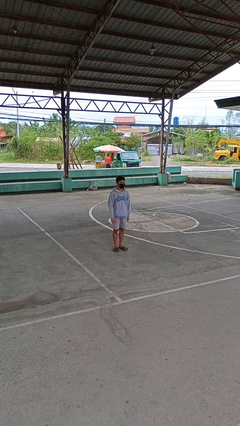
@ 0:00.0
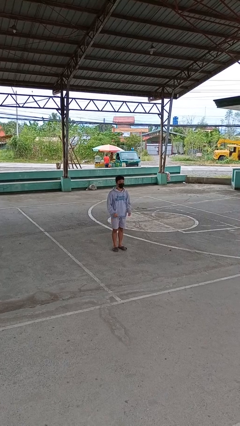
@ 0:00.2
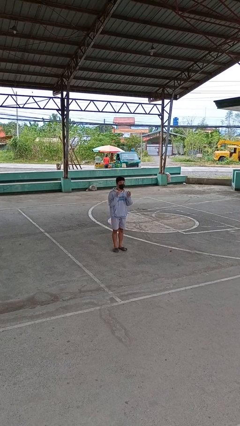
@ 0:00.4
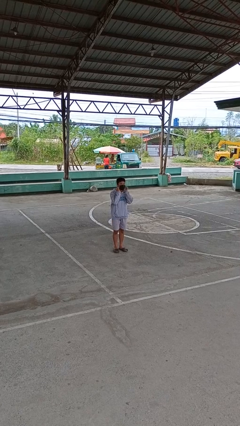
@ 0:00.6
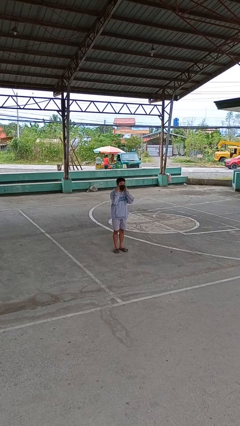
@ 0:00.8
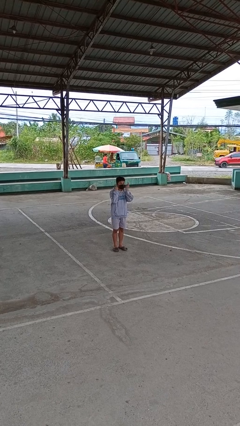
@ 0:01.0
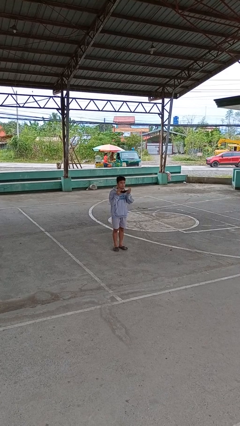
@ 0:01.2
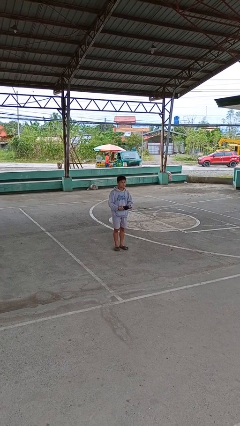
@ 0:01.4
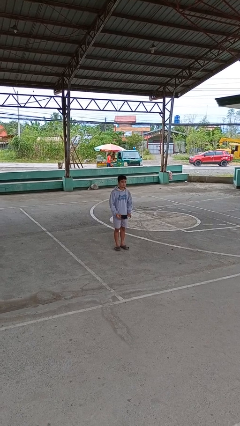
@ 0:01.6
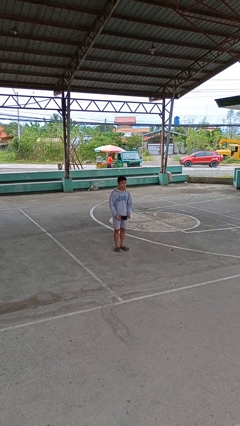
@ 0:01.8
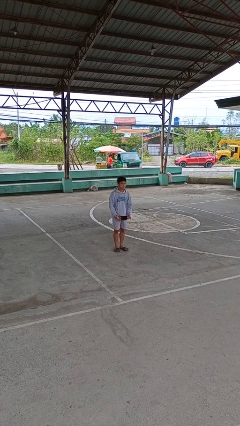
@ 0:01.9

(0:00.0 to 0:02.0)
person takes off facemask

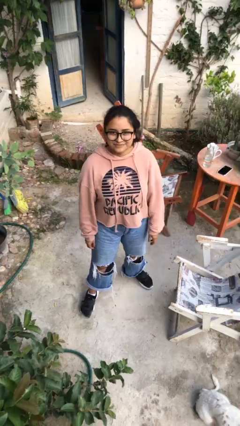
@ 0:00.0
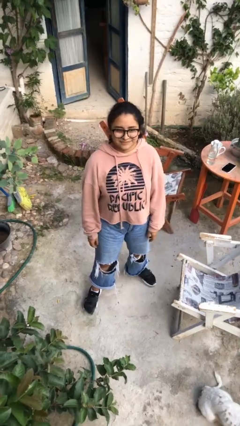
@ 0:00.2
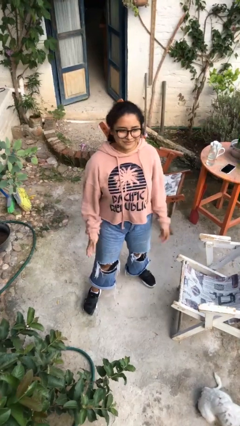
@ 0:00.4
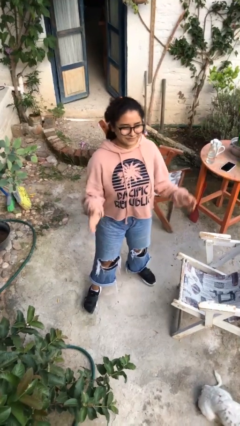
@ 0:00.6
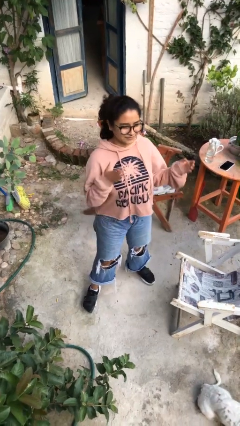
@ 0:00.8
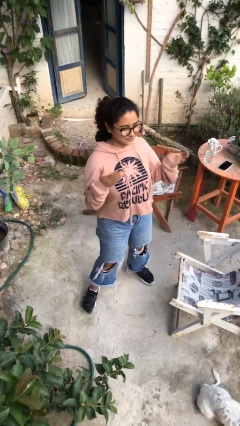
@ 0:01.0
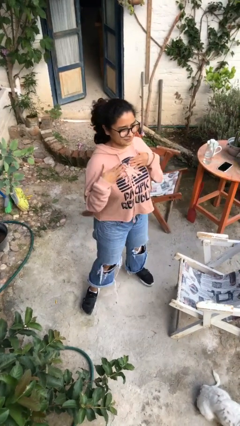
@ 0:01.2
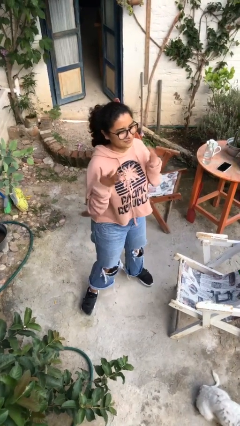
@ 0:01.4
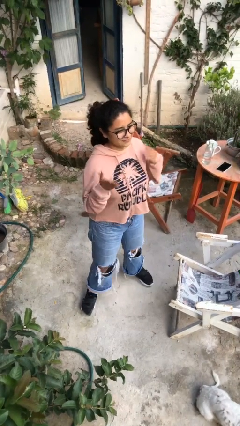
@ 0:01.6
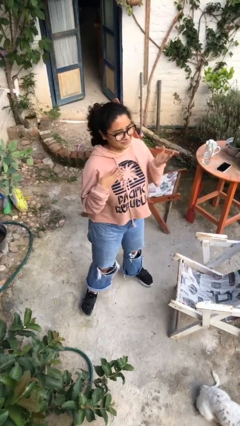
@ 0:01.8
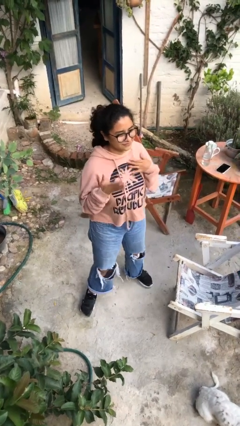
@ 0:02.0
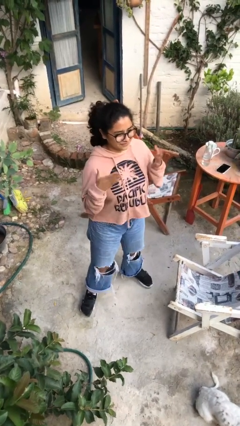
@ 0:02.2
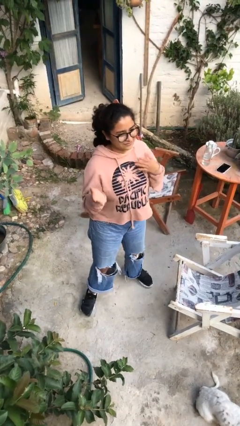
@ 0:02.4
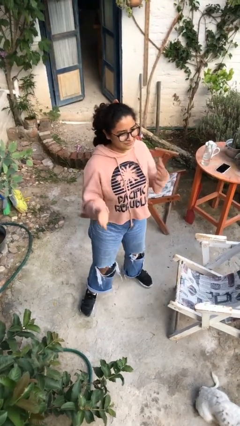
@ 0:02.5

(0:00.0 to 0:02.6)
person drums on chest

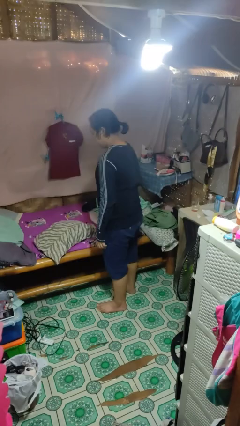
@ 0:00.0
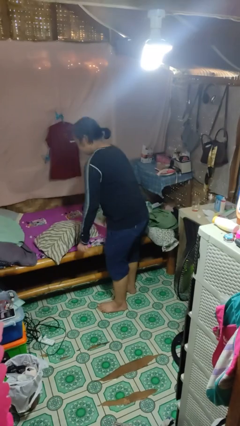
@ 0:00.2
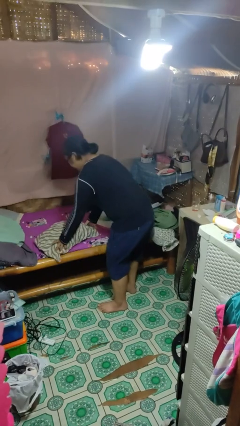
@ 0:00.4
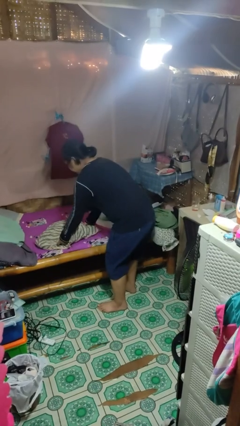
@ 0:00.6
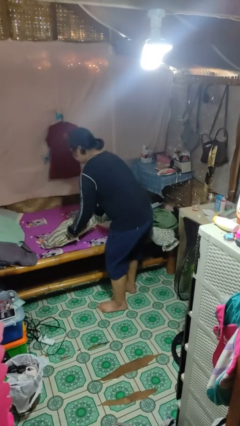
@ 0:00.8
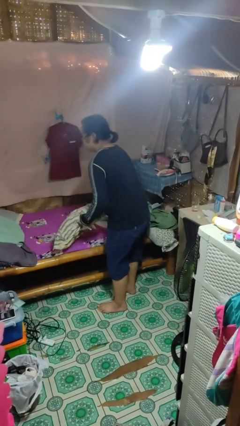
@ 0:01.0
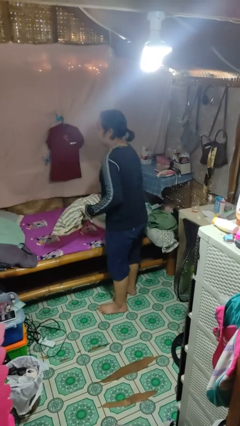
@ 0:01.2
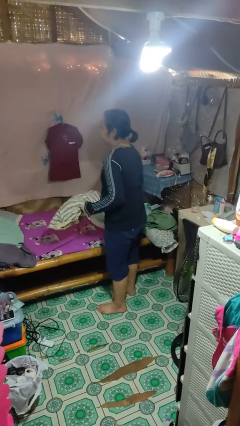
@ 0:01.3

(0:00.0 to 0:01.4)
person picks up object from bed

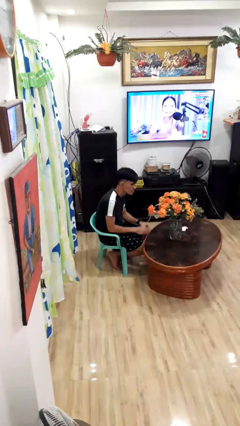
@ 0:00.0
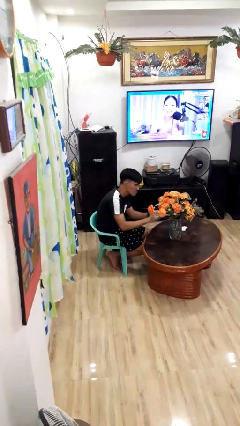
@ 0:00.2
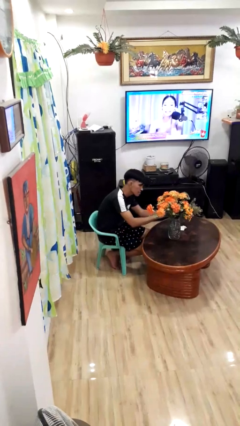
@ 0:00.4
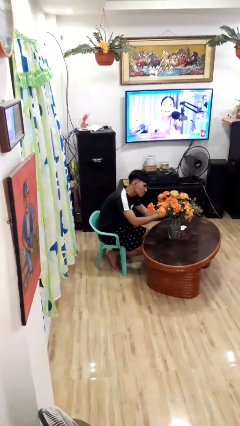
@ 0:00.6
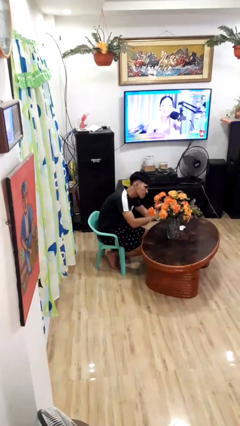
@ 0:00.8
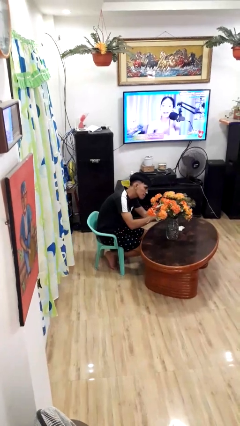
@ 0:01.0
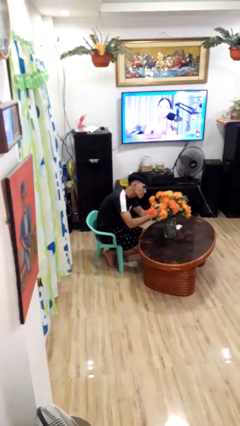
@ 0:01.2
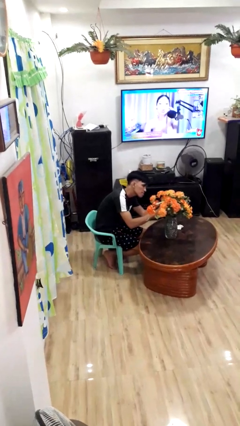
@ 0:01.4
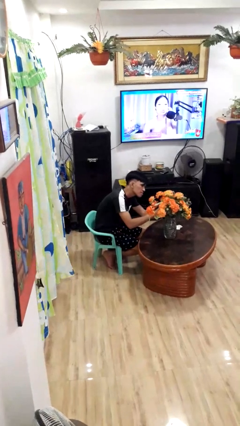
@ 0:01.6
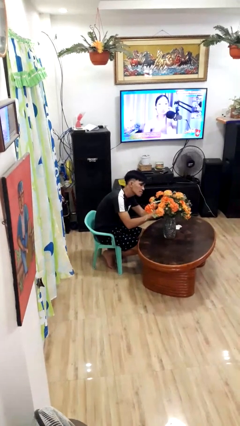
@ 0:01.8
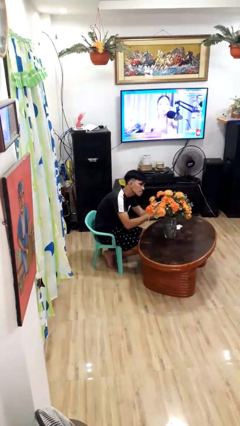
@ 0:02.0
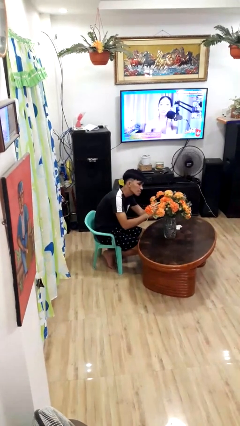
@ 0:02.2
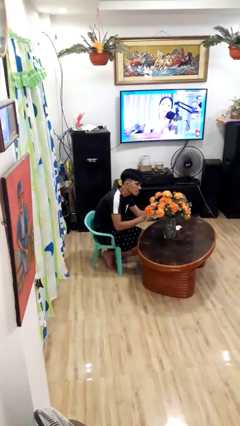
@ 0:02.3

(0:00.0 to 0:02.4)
person arranges flowers in vase

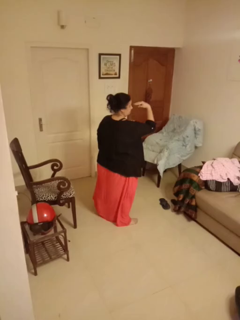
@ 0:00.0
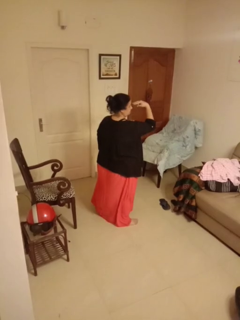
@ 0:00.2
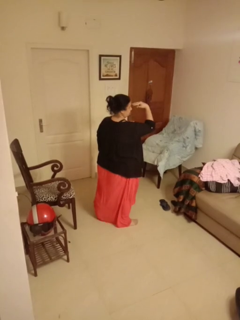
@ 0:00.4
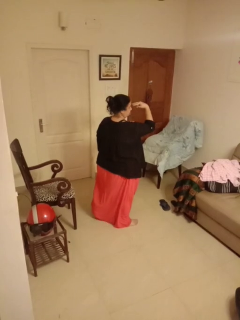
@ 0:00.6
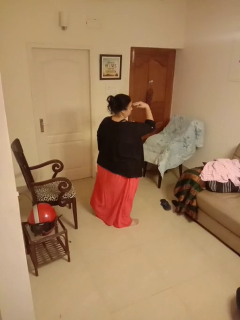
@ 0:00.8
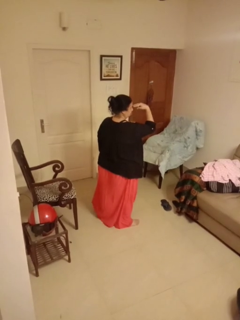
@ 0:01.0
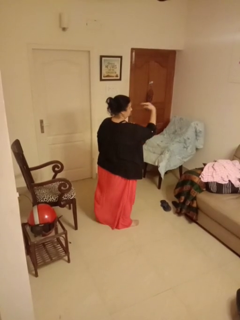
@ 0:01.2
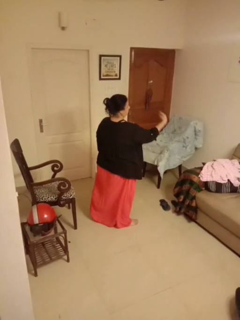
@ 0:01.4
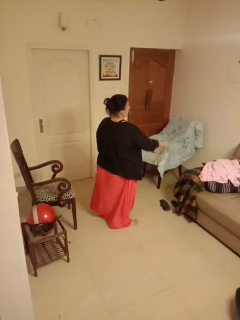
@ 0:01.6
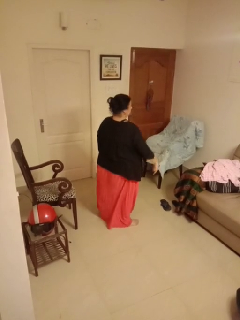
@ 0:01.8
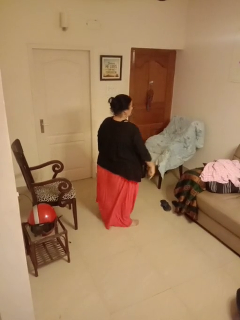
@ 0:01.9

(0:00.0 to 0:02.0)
person gestures watch closely

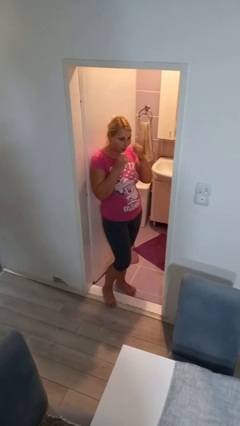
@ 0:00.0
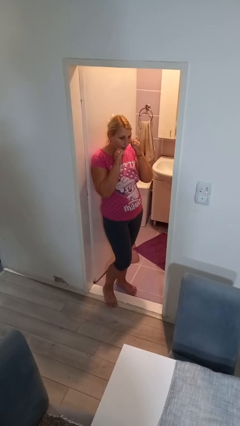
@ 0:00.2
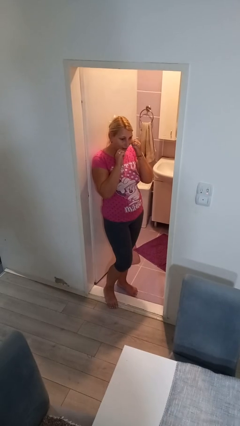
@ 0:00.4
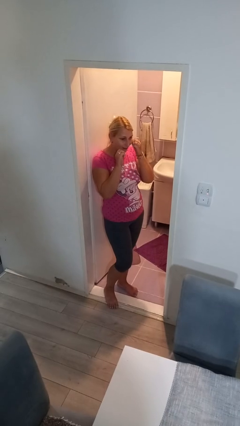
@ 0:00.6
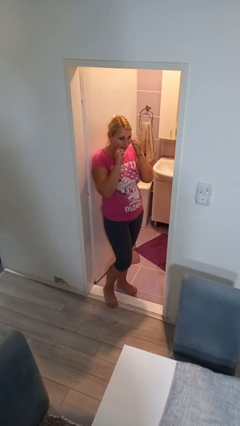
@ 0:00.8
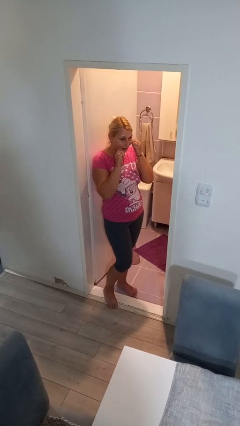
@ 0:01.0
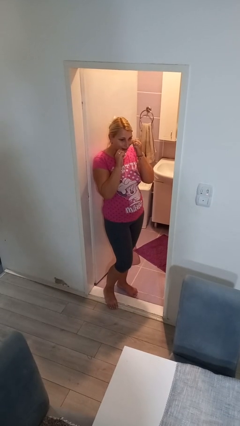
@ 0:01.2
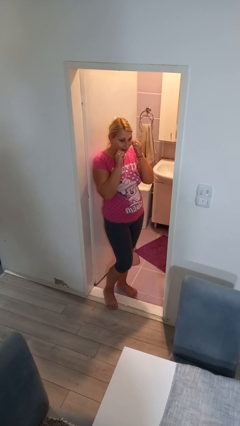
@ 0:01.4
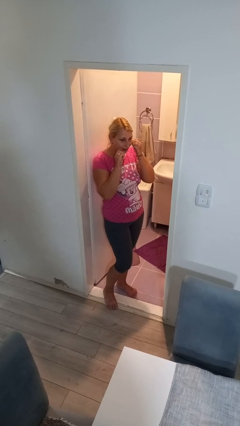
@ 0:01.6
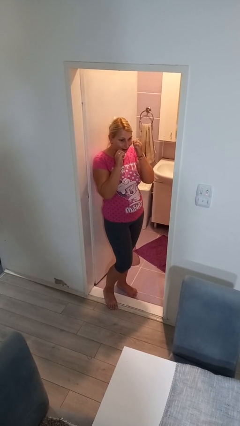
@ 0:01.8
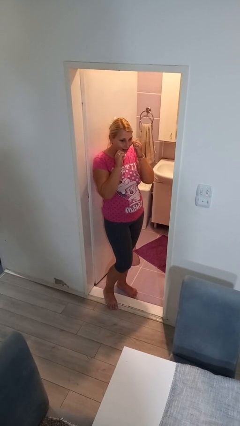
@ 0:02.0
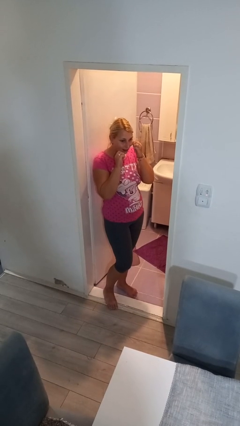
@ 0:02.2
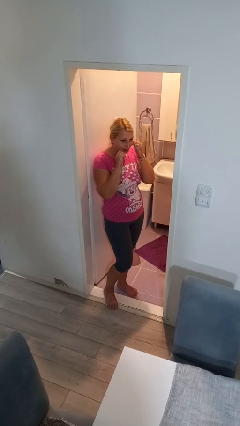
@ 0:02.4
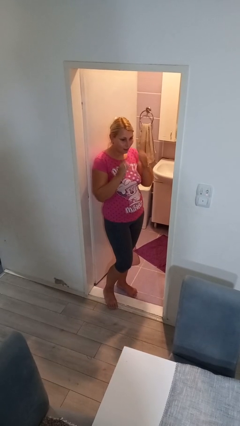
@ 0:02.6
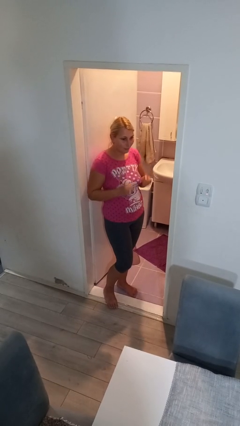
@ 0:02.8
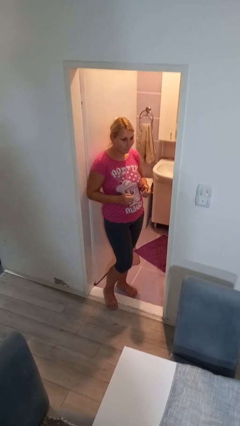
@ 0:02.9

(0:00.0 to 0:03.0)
person flosses

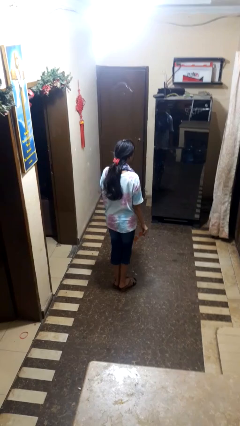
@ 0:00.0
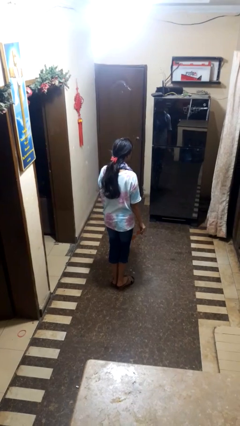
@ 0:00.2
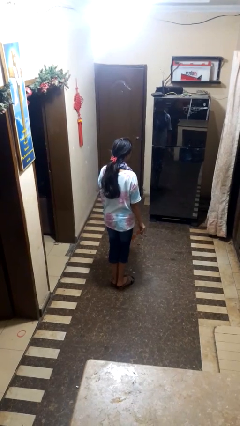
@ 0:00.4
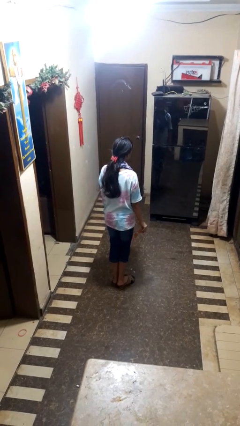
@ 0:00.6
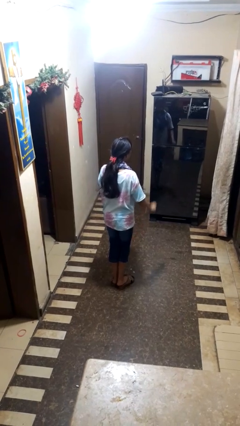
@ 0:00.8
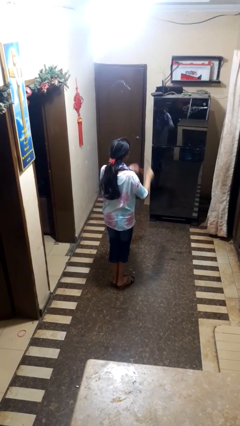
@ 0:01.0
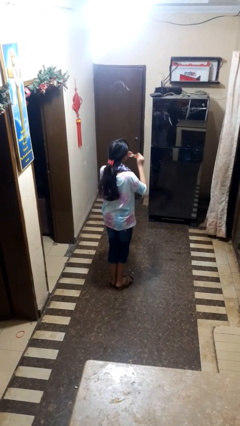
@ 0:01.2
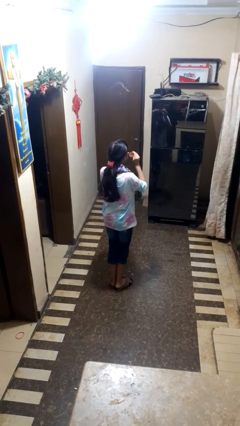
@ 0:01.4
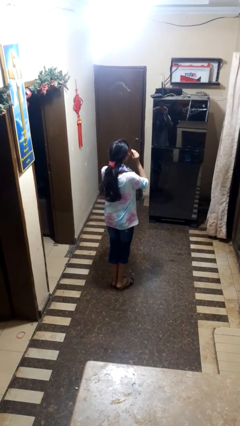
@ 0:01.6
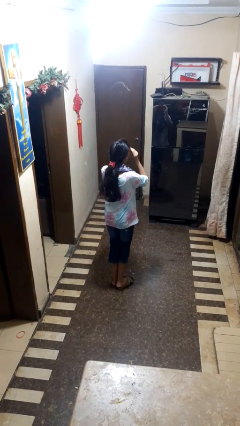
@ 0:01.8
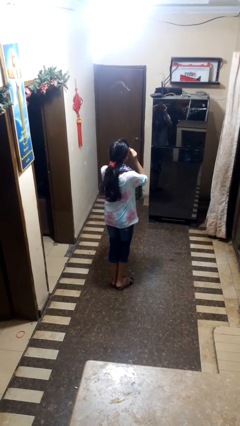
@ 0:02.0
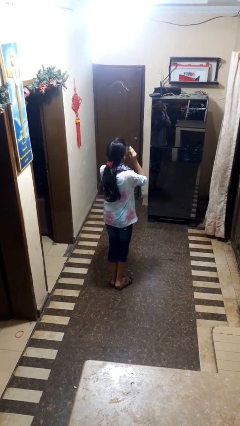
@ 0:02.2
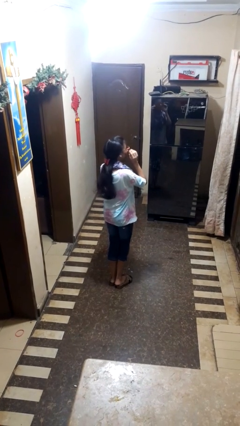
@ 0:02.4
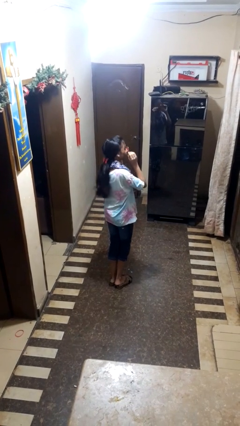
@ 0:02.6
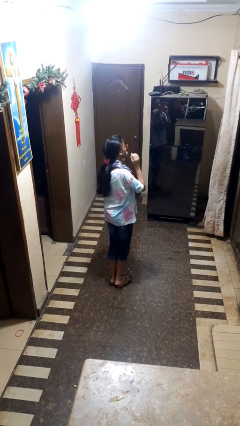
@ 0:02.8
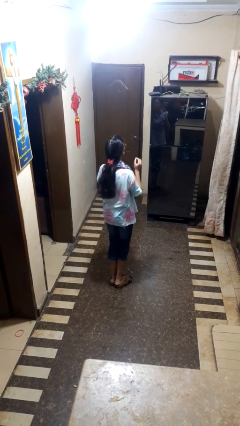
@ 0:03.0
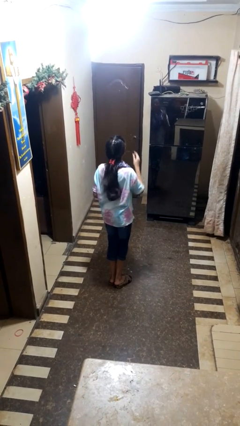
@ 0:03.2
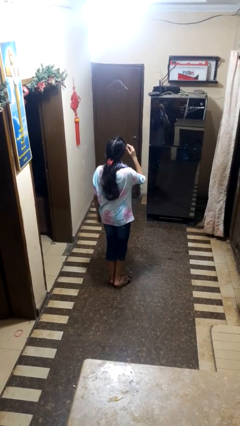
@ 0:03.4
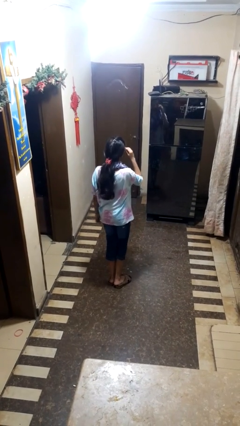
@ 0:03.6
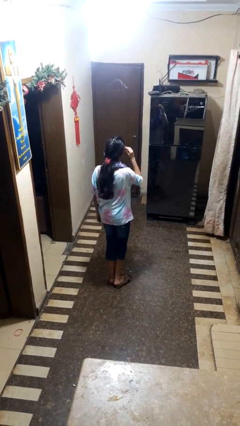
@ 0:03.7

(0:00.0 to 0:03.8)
person puts on sunglasses

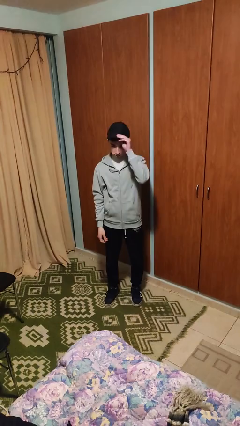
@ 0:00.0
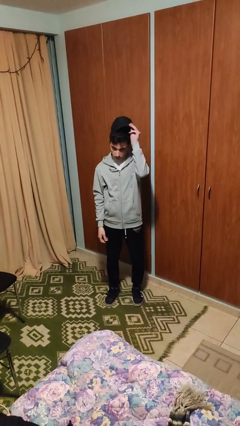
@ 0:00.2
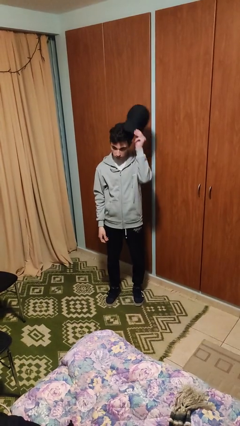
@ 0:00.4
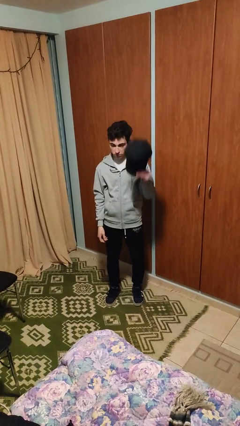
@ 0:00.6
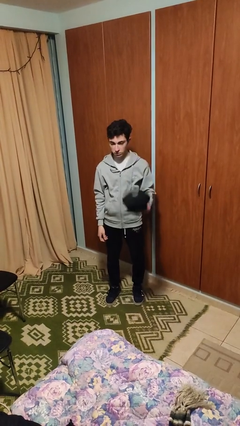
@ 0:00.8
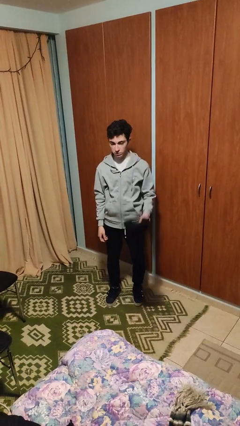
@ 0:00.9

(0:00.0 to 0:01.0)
person takes off hat
